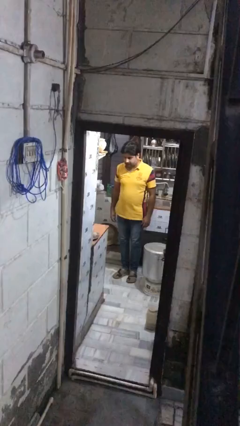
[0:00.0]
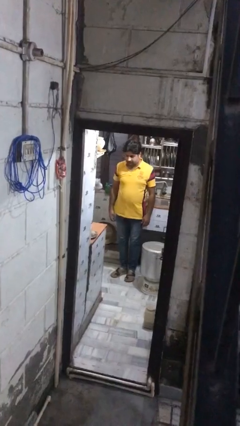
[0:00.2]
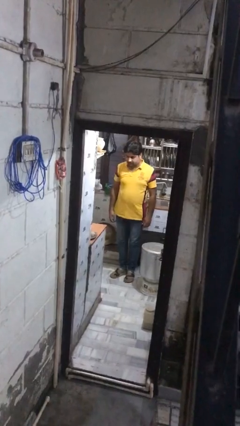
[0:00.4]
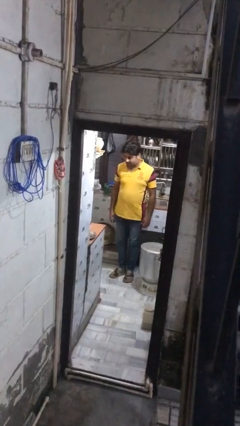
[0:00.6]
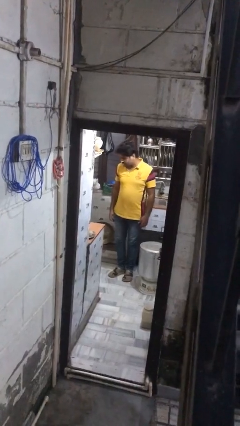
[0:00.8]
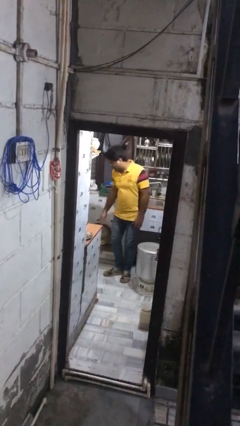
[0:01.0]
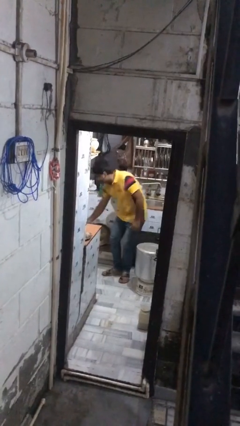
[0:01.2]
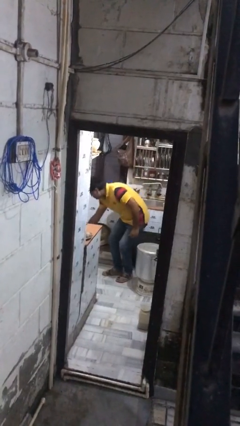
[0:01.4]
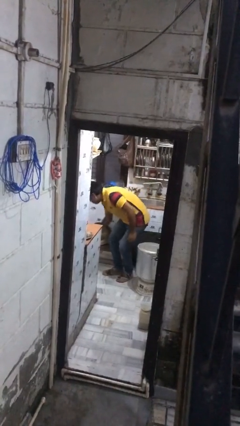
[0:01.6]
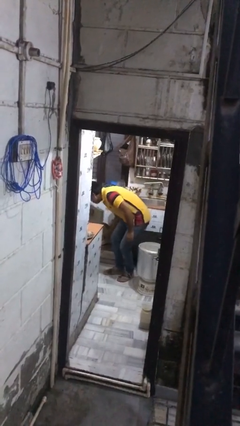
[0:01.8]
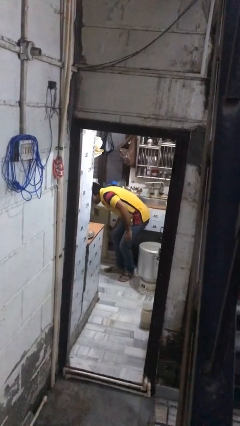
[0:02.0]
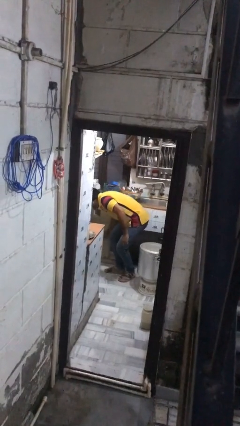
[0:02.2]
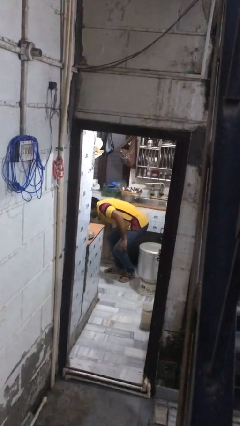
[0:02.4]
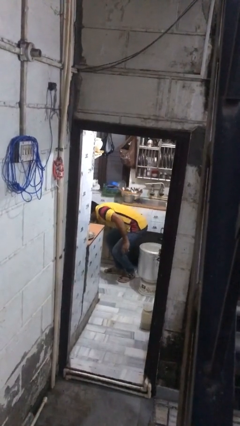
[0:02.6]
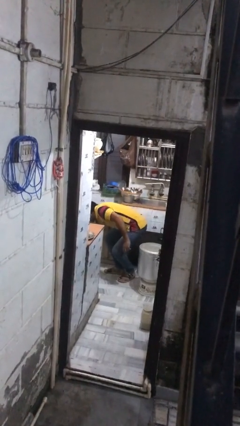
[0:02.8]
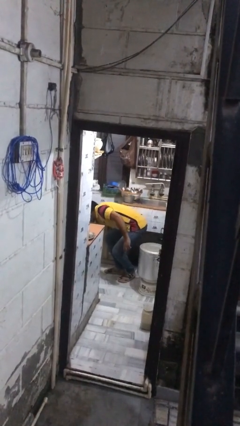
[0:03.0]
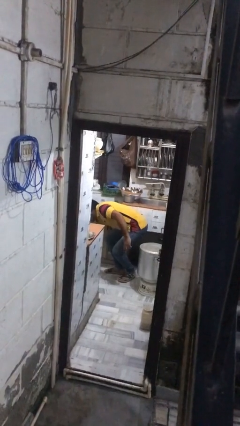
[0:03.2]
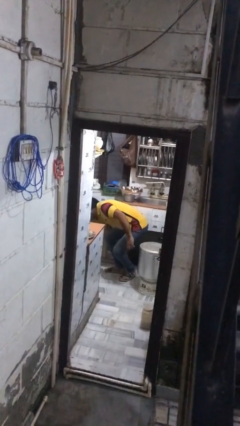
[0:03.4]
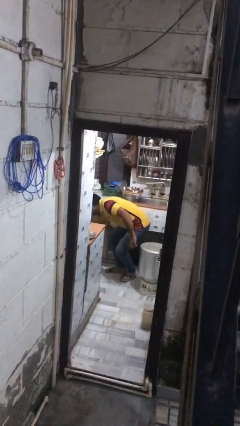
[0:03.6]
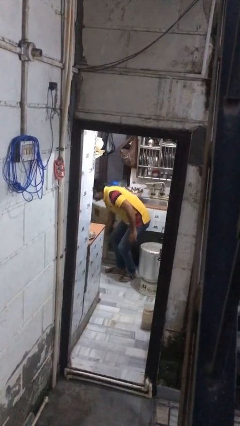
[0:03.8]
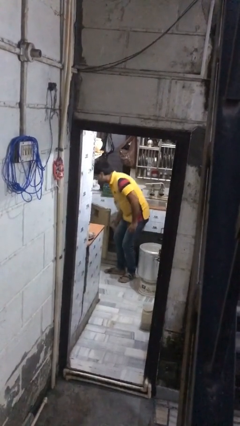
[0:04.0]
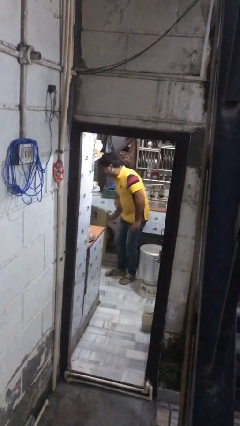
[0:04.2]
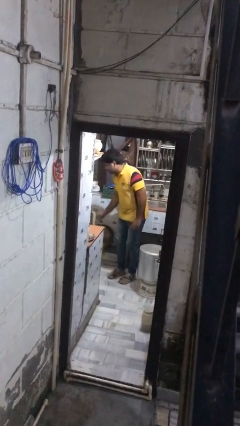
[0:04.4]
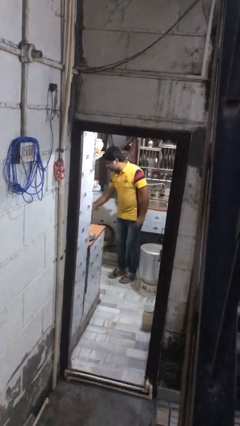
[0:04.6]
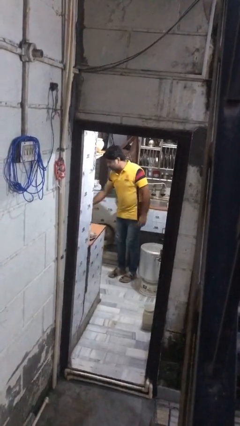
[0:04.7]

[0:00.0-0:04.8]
person searches in kitchen drawer

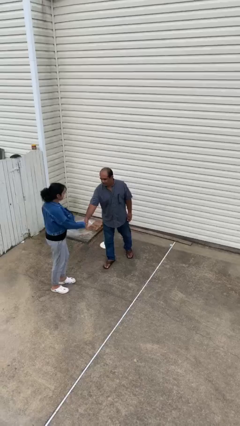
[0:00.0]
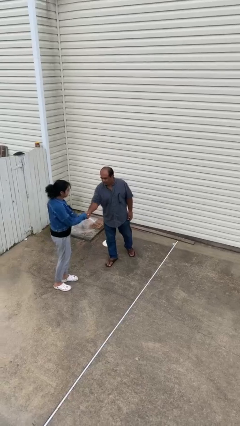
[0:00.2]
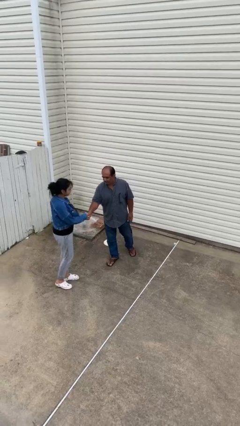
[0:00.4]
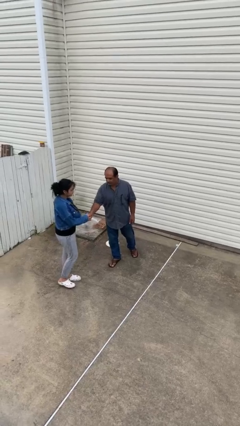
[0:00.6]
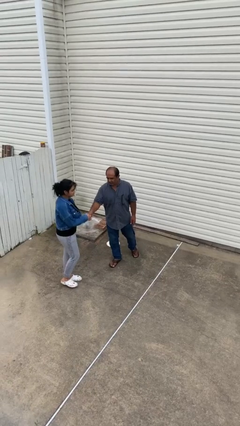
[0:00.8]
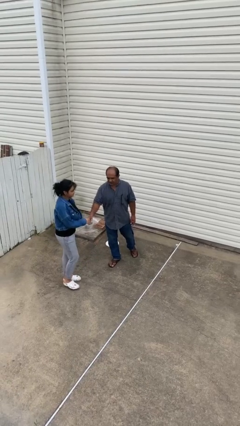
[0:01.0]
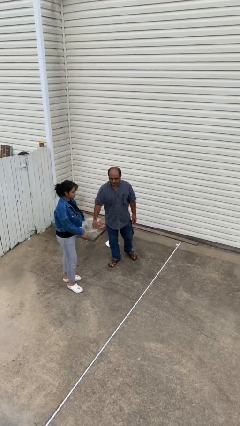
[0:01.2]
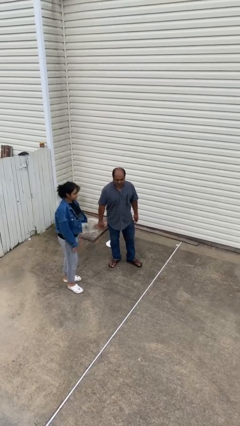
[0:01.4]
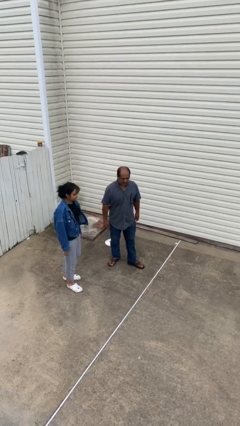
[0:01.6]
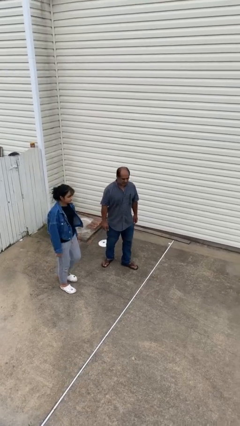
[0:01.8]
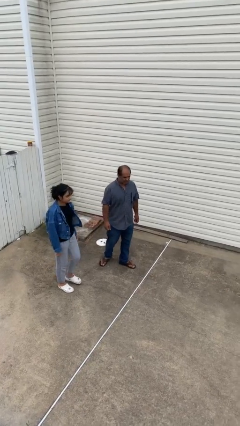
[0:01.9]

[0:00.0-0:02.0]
person shakes hand

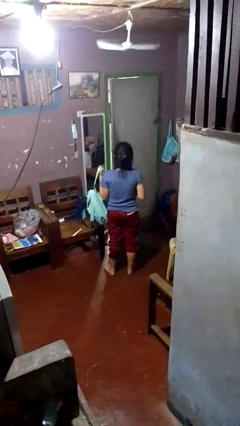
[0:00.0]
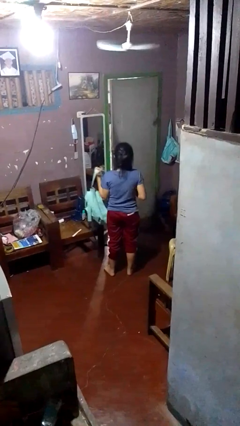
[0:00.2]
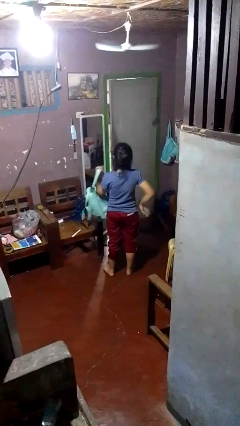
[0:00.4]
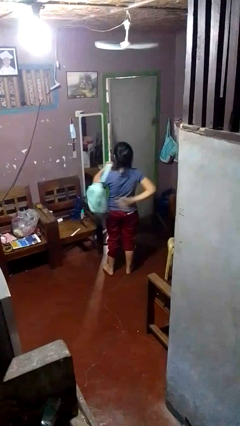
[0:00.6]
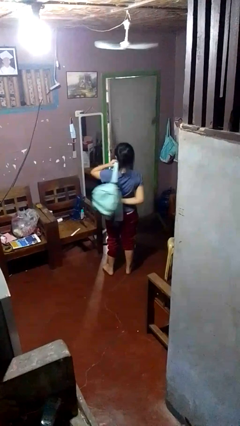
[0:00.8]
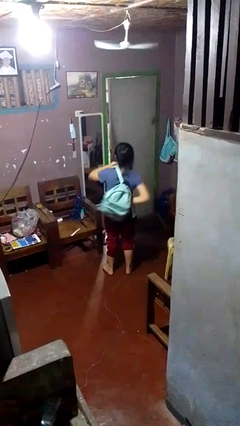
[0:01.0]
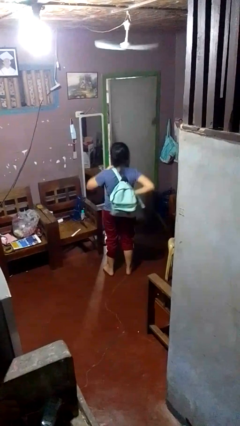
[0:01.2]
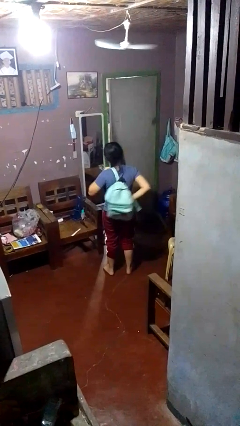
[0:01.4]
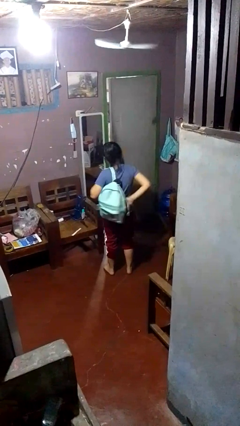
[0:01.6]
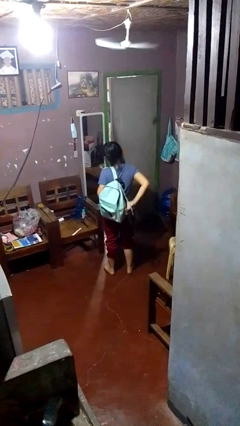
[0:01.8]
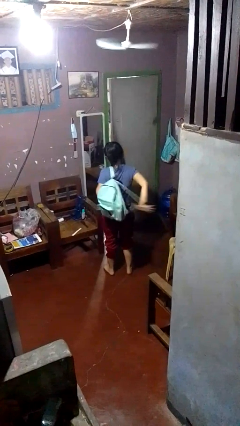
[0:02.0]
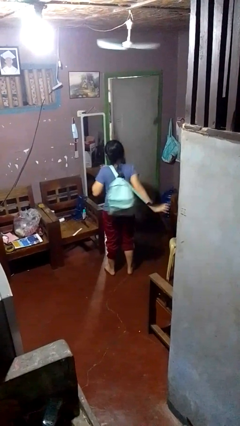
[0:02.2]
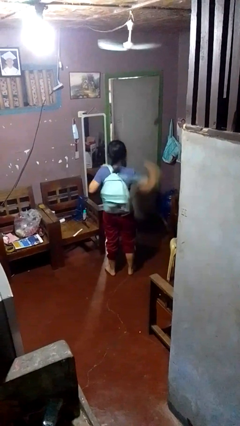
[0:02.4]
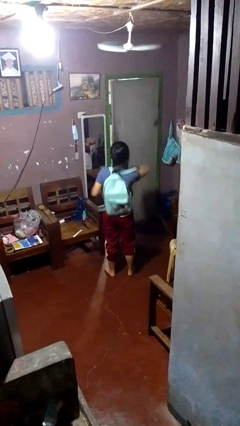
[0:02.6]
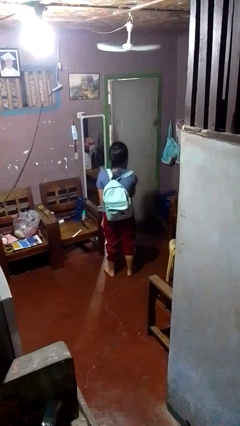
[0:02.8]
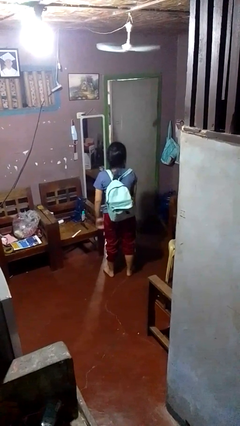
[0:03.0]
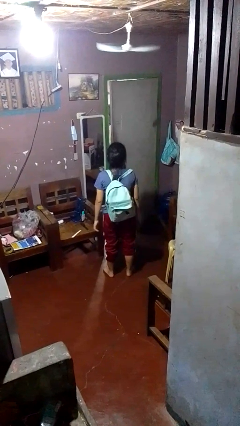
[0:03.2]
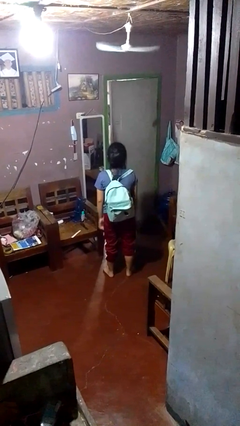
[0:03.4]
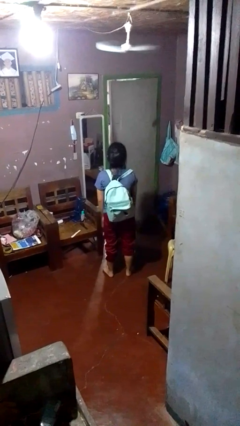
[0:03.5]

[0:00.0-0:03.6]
person puts on backpack

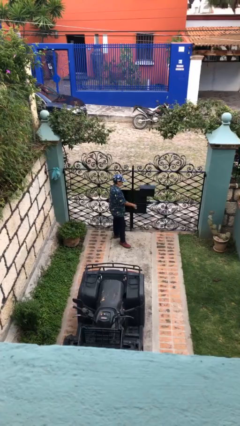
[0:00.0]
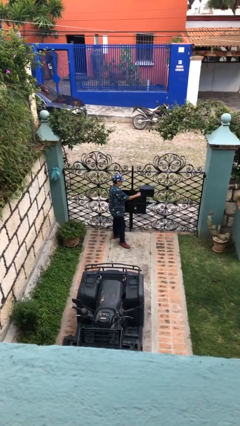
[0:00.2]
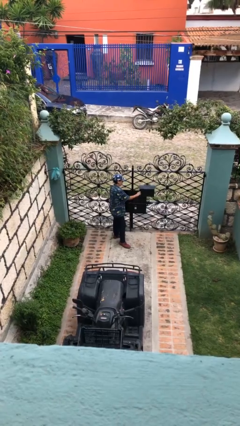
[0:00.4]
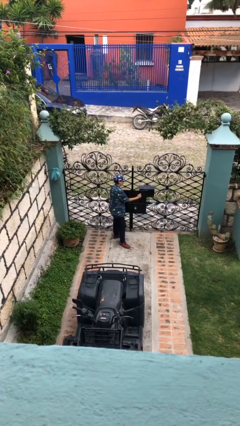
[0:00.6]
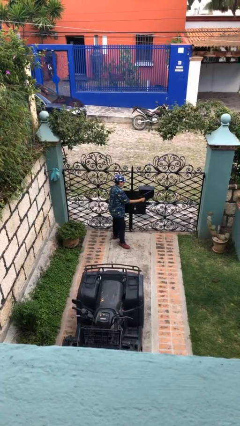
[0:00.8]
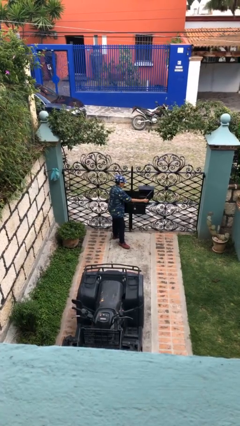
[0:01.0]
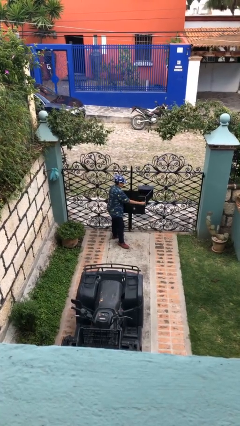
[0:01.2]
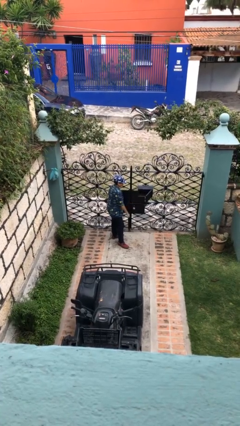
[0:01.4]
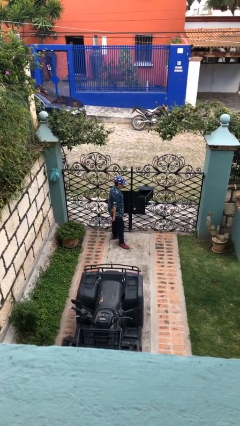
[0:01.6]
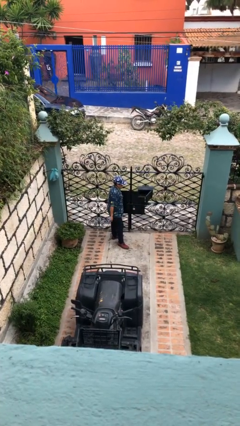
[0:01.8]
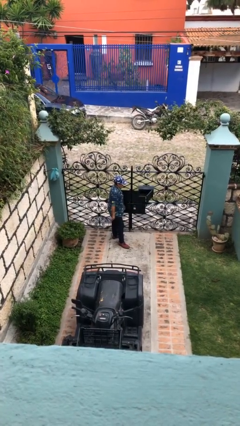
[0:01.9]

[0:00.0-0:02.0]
person opens mailbox

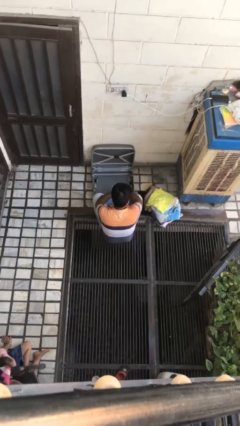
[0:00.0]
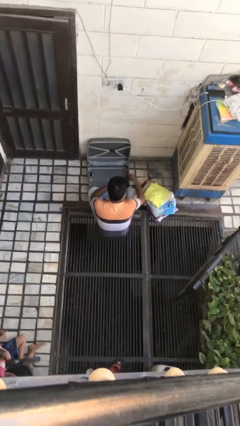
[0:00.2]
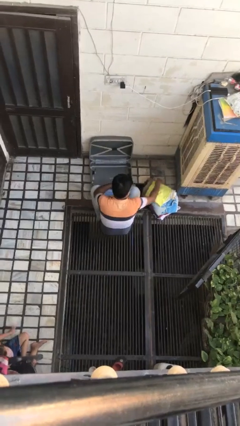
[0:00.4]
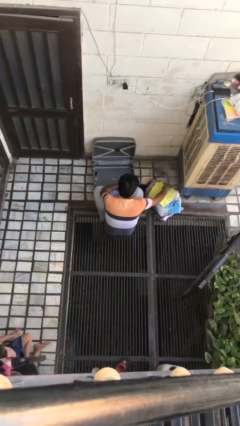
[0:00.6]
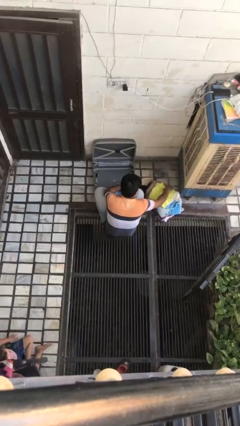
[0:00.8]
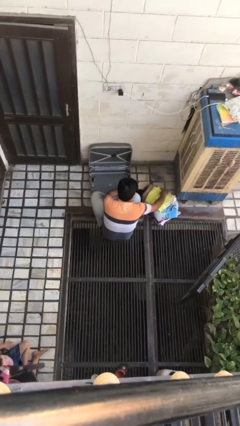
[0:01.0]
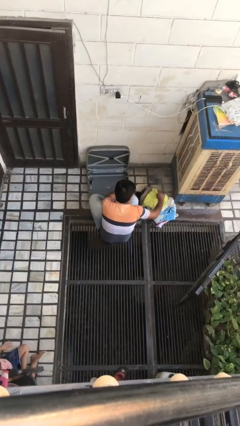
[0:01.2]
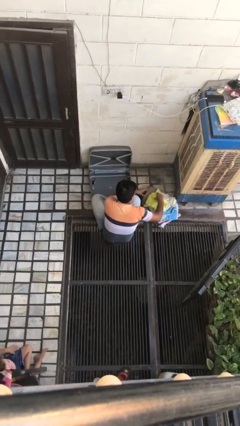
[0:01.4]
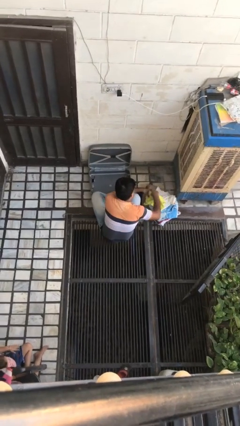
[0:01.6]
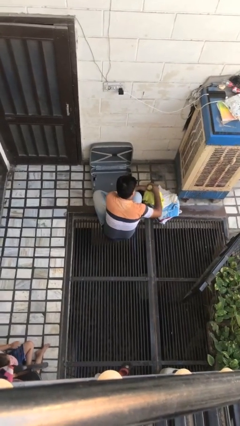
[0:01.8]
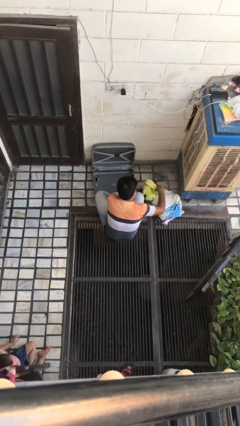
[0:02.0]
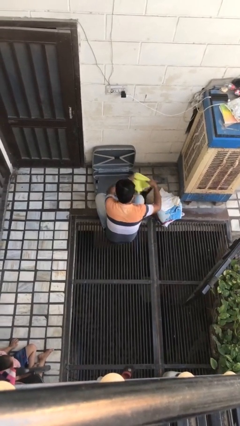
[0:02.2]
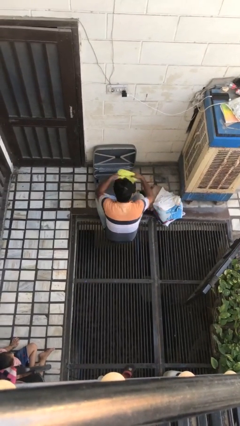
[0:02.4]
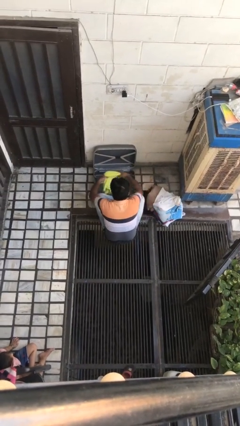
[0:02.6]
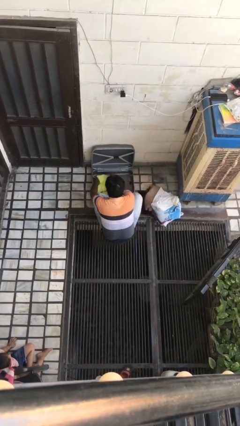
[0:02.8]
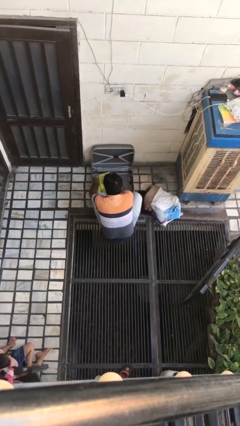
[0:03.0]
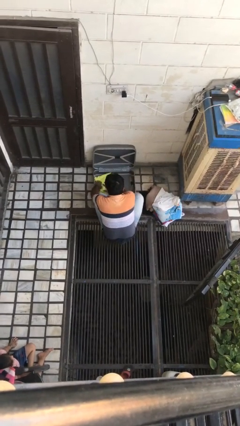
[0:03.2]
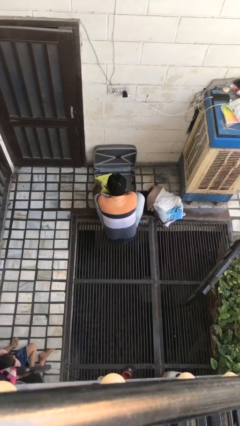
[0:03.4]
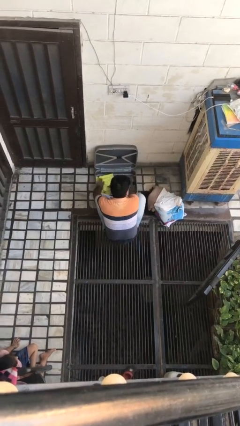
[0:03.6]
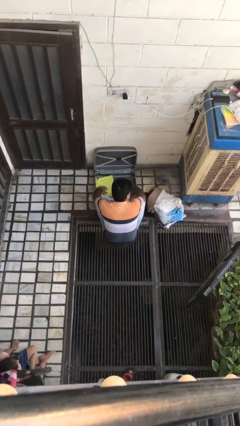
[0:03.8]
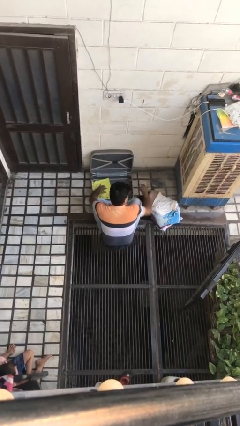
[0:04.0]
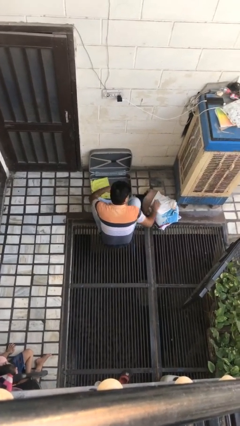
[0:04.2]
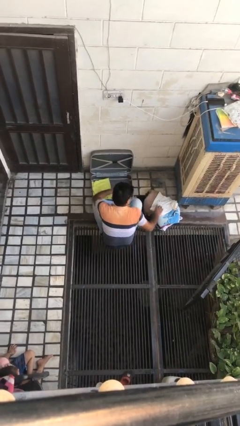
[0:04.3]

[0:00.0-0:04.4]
person loads clothes into suitcase

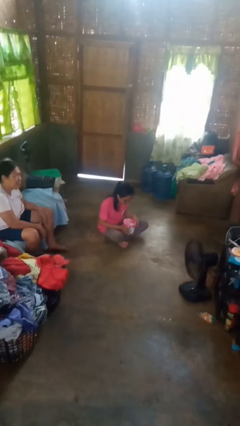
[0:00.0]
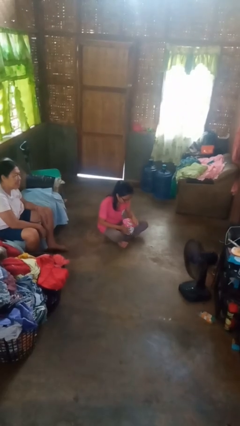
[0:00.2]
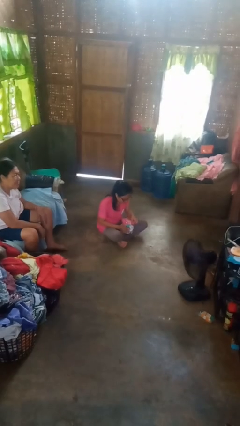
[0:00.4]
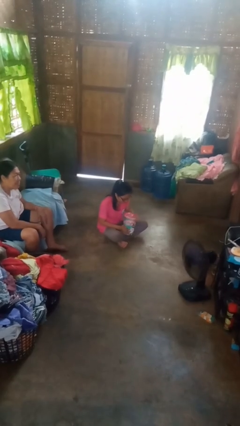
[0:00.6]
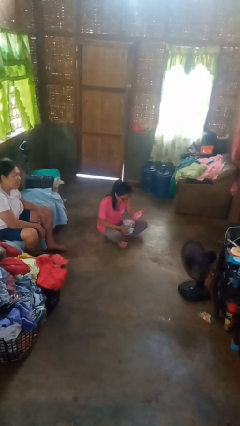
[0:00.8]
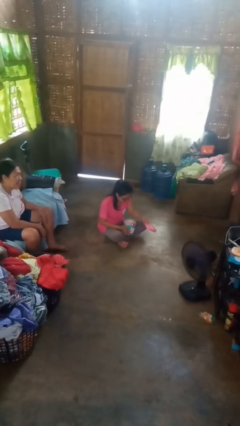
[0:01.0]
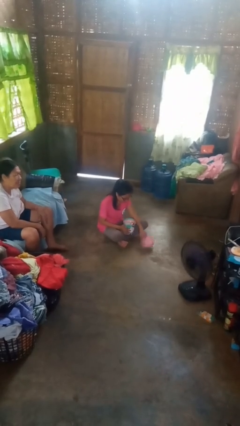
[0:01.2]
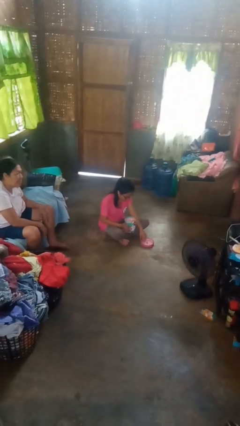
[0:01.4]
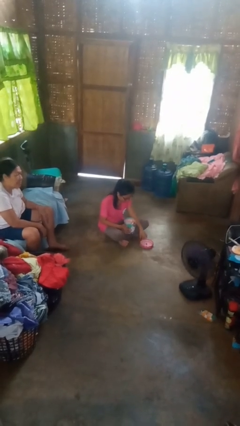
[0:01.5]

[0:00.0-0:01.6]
person opens jewelry box
